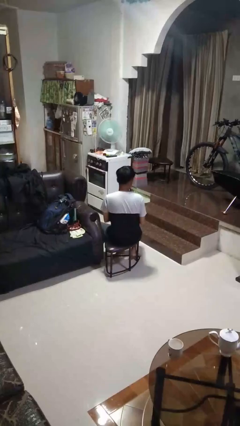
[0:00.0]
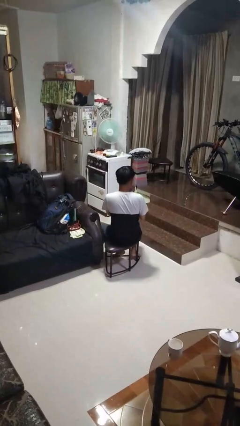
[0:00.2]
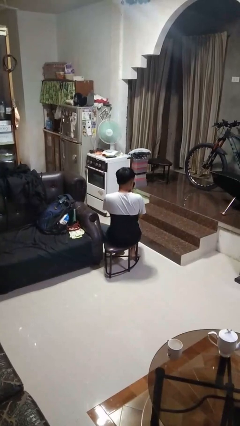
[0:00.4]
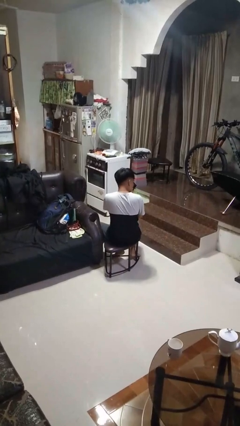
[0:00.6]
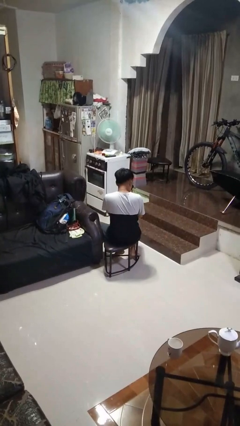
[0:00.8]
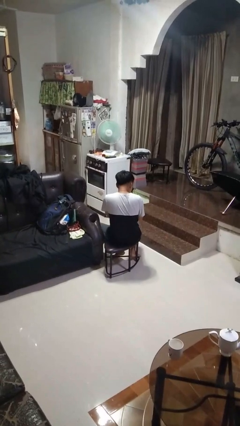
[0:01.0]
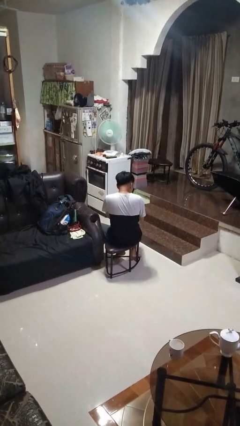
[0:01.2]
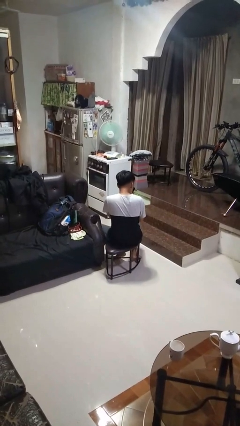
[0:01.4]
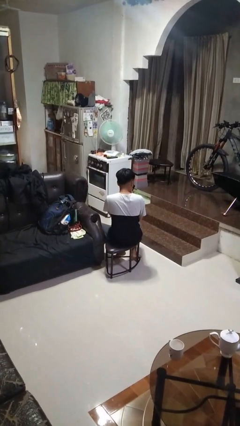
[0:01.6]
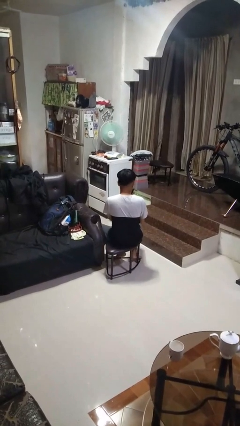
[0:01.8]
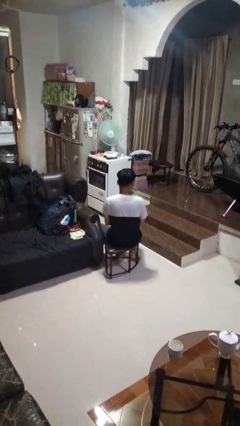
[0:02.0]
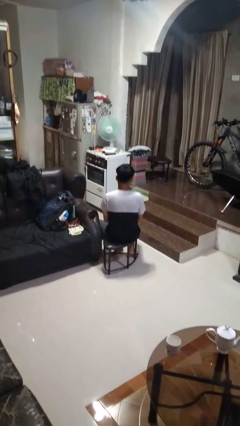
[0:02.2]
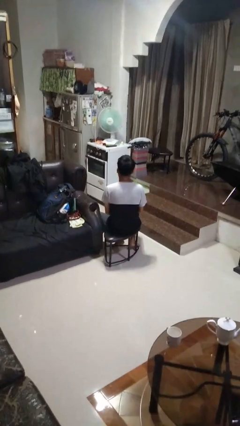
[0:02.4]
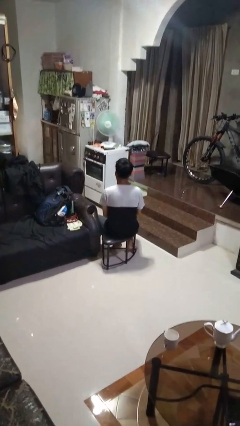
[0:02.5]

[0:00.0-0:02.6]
person blows nose

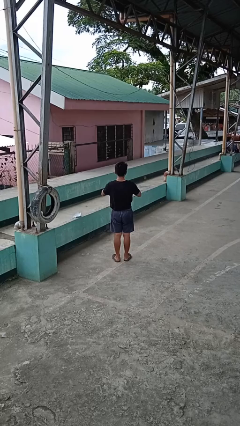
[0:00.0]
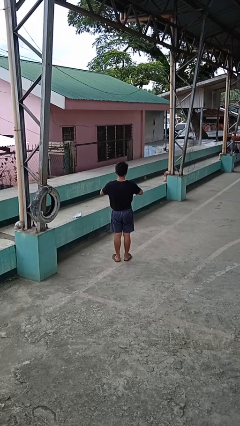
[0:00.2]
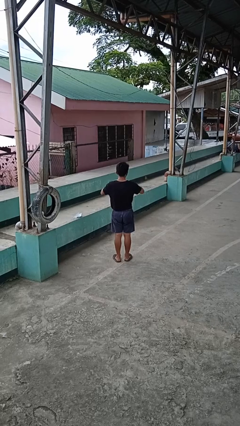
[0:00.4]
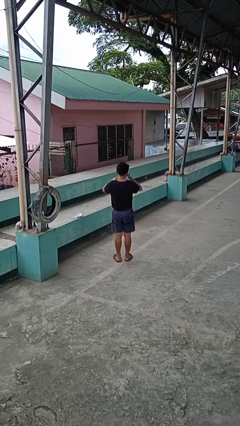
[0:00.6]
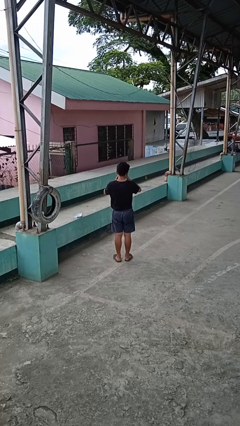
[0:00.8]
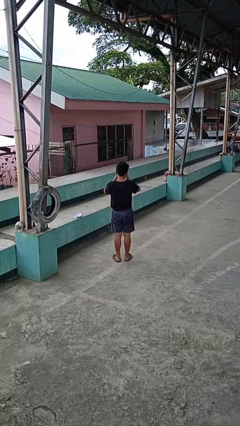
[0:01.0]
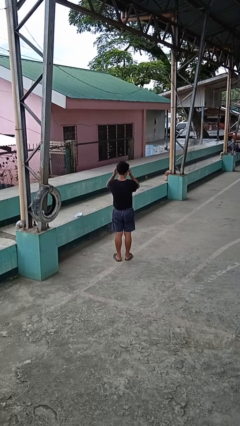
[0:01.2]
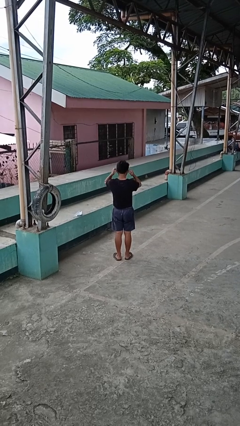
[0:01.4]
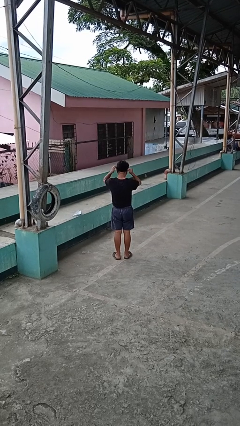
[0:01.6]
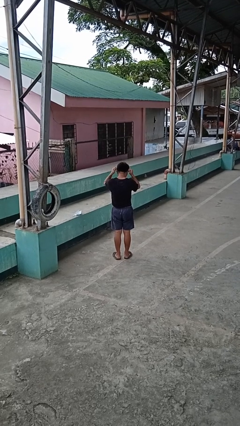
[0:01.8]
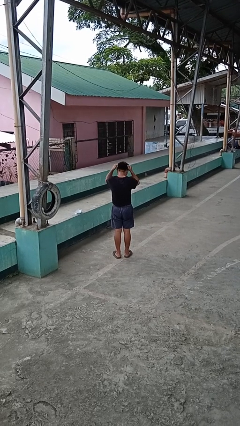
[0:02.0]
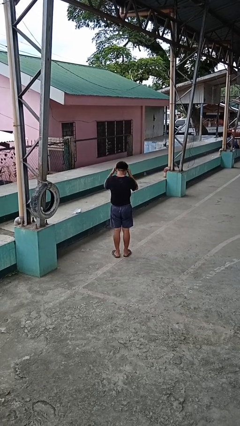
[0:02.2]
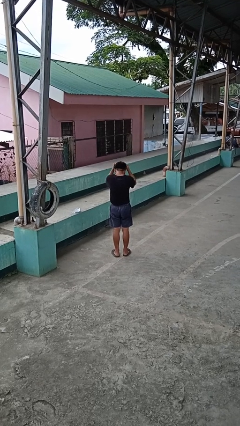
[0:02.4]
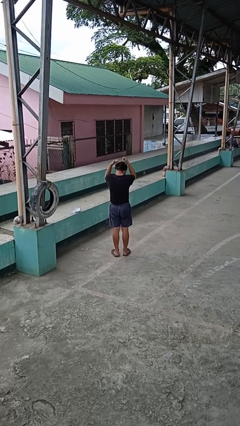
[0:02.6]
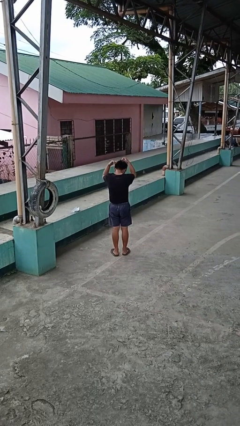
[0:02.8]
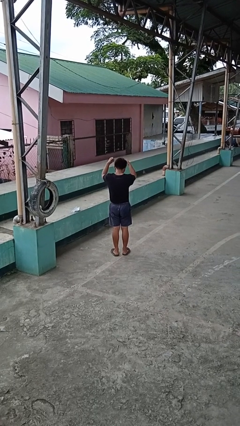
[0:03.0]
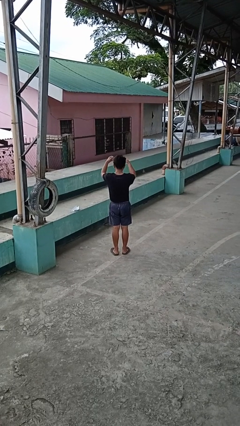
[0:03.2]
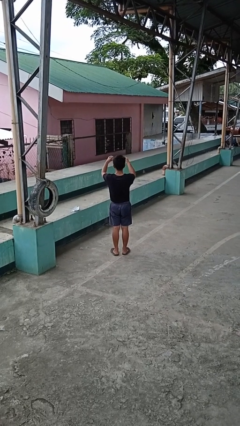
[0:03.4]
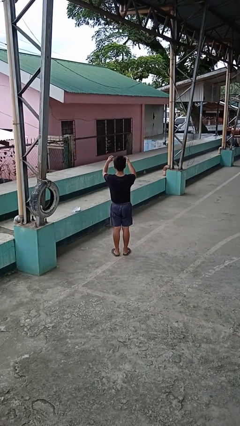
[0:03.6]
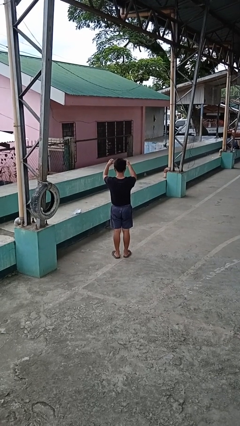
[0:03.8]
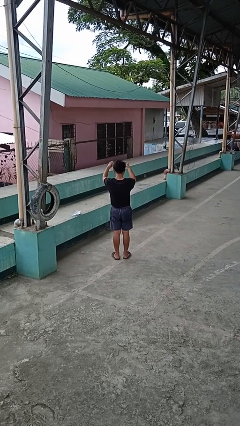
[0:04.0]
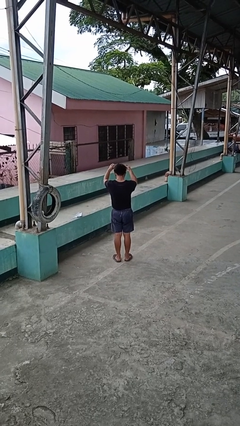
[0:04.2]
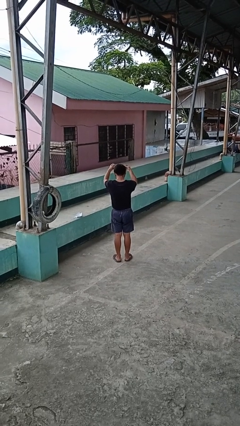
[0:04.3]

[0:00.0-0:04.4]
person takes off necklace

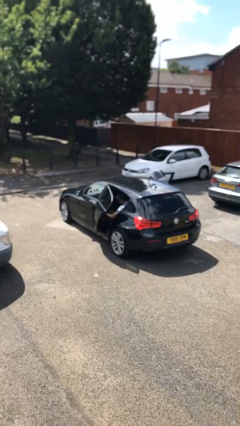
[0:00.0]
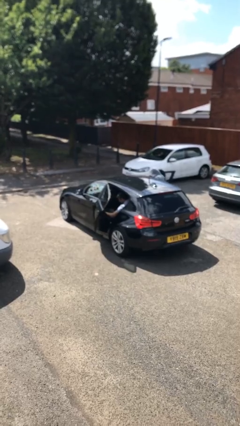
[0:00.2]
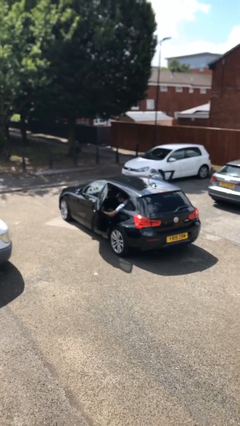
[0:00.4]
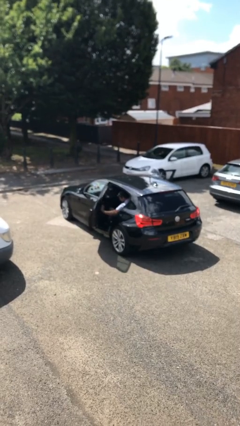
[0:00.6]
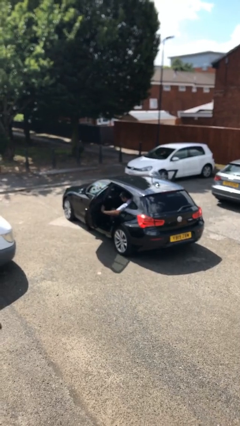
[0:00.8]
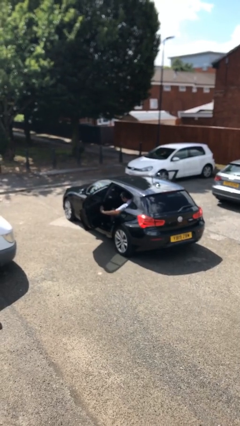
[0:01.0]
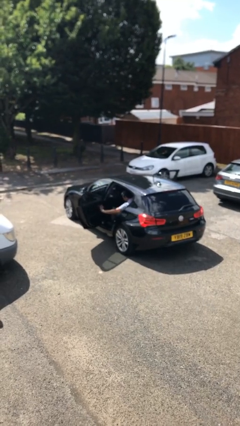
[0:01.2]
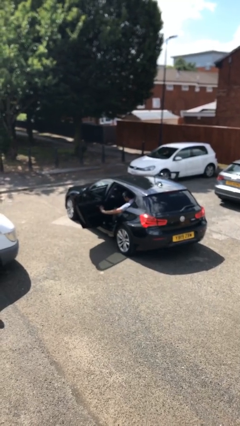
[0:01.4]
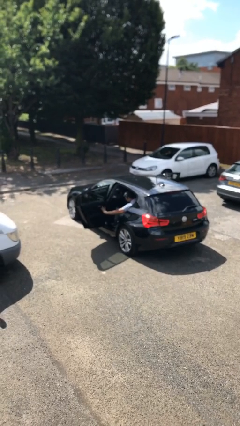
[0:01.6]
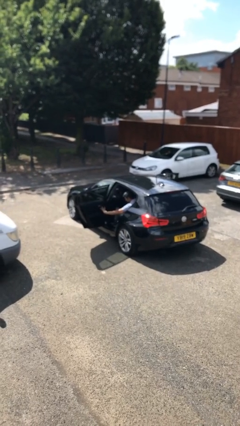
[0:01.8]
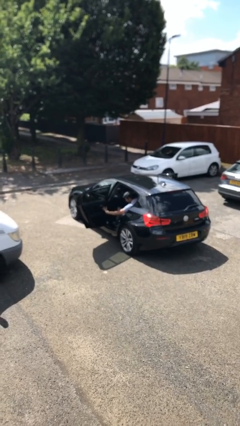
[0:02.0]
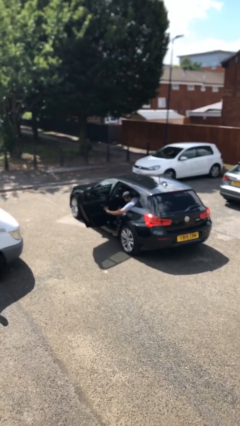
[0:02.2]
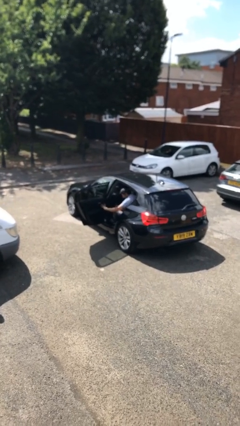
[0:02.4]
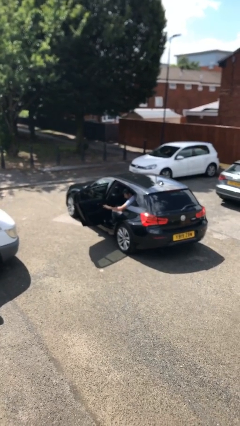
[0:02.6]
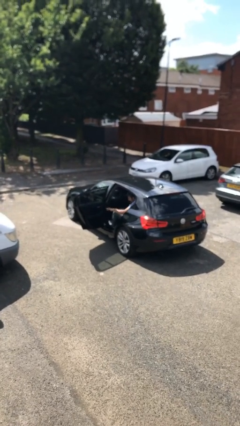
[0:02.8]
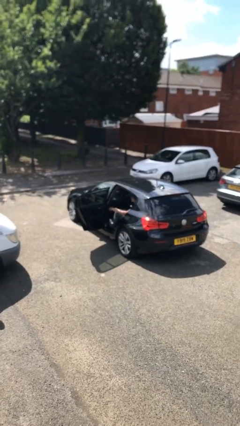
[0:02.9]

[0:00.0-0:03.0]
person opens car door

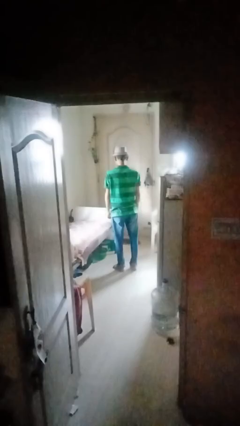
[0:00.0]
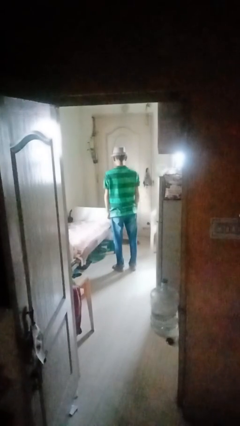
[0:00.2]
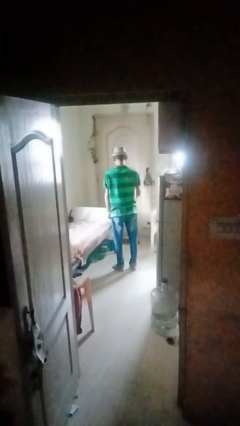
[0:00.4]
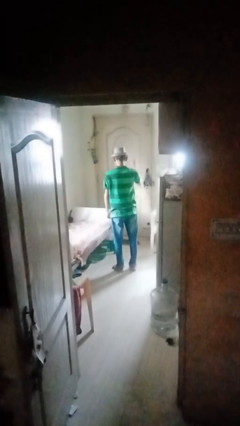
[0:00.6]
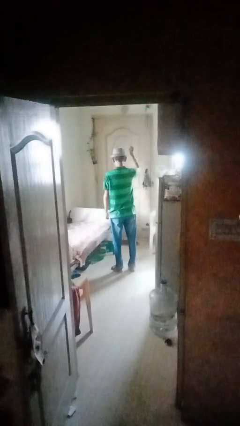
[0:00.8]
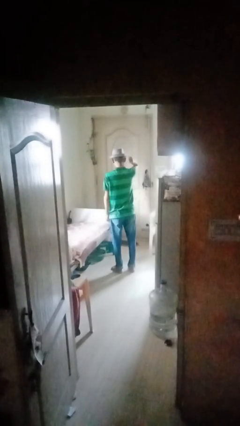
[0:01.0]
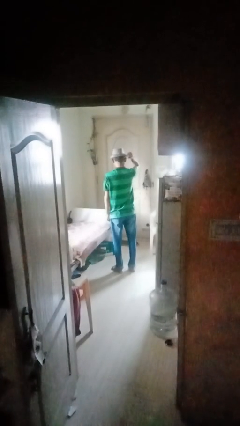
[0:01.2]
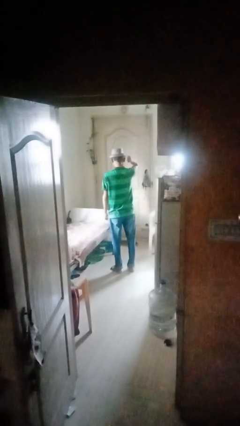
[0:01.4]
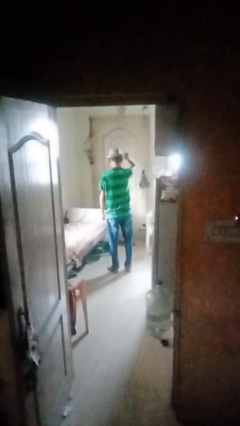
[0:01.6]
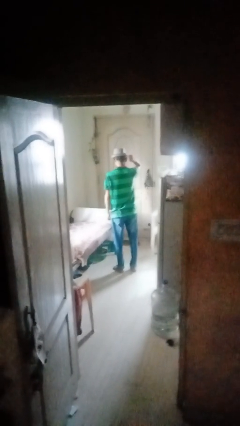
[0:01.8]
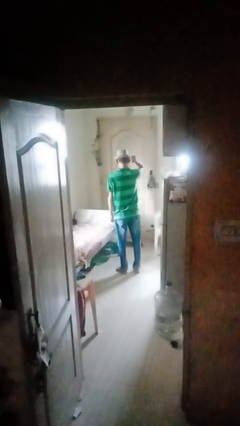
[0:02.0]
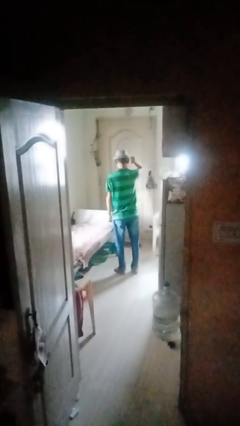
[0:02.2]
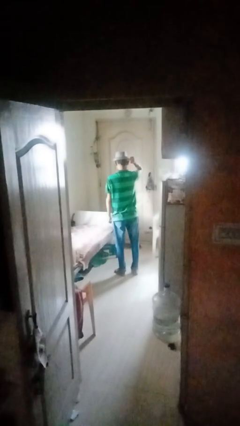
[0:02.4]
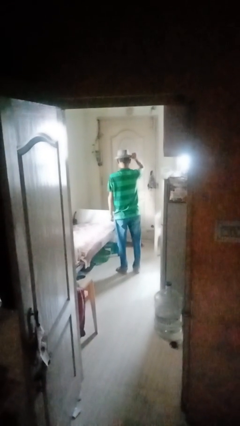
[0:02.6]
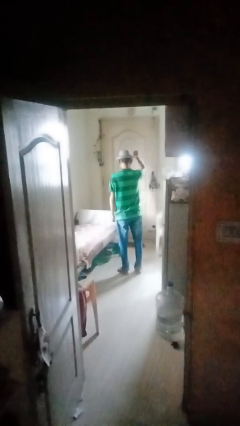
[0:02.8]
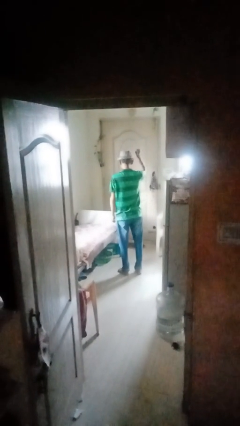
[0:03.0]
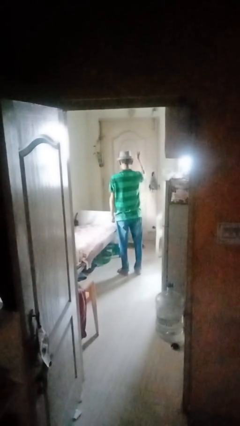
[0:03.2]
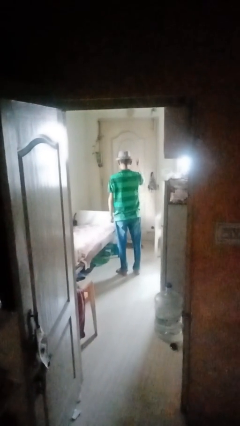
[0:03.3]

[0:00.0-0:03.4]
person gestures behind me

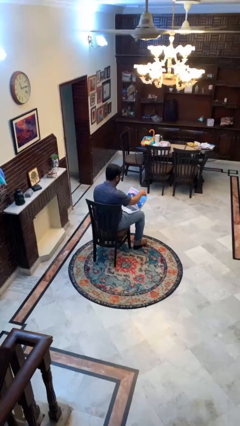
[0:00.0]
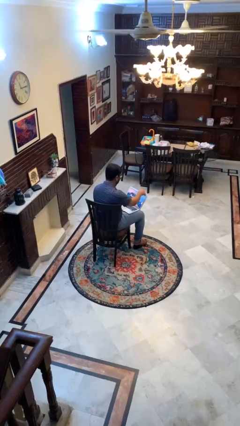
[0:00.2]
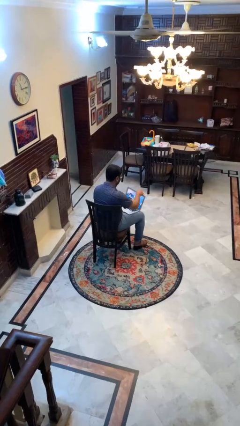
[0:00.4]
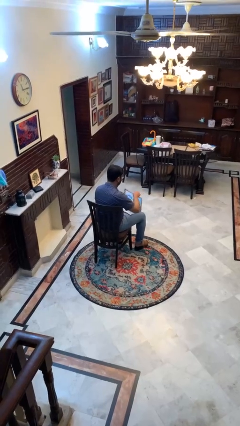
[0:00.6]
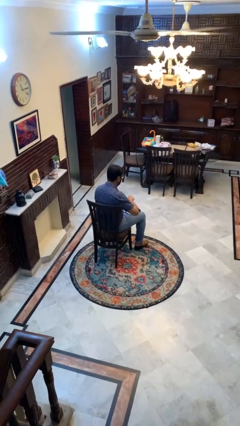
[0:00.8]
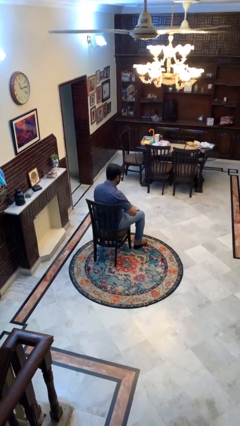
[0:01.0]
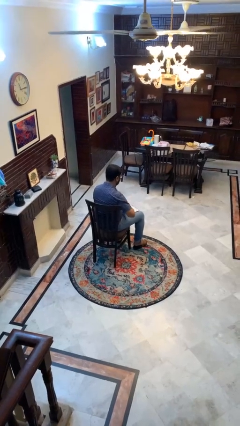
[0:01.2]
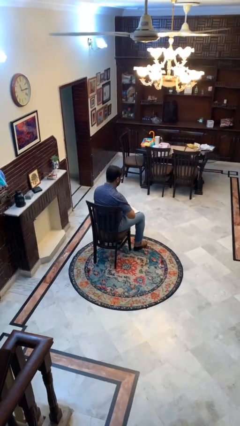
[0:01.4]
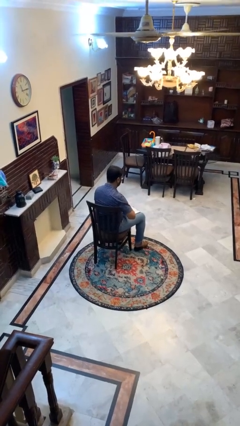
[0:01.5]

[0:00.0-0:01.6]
person closes laptop

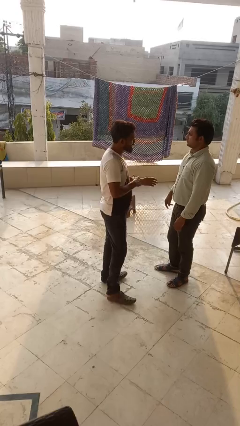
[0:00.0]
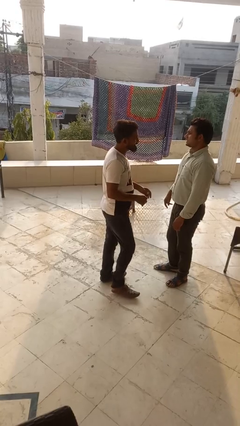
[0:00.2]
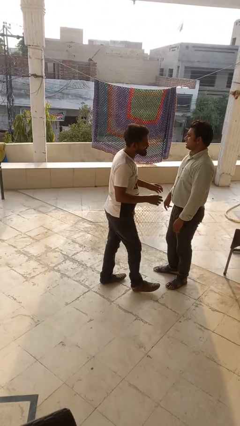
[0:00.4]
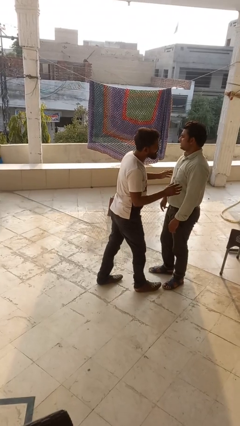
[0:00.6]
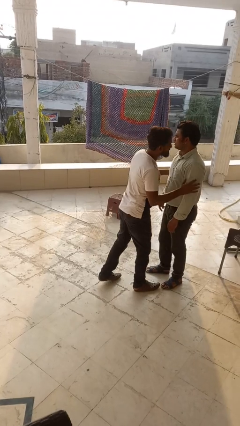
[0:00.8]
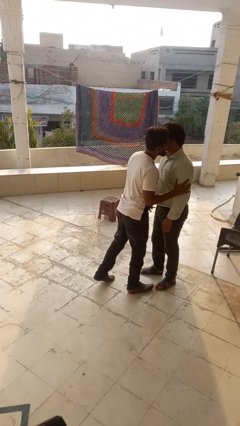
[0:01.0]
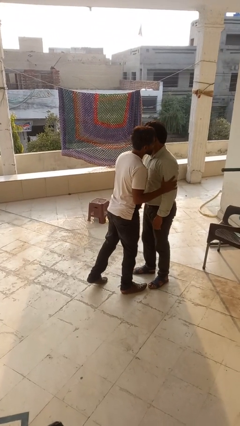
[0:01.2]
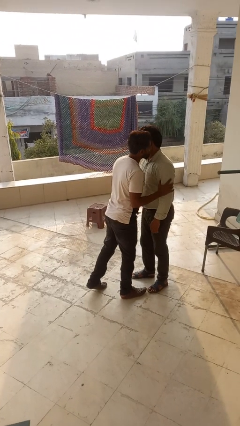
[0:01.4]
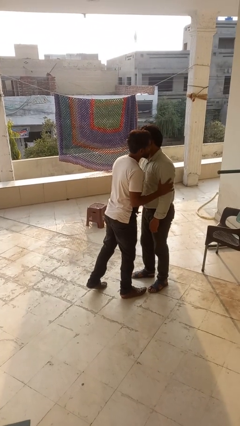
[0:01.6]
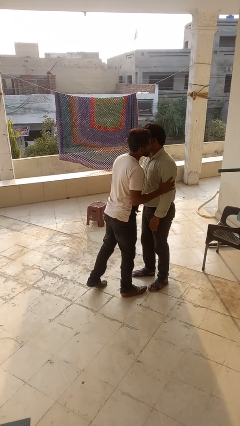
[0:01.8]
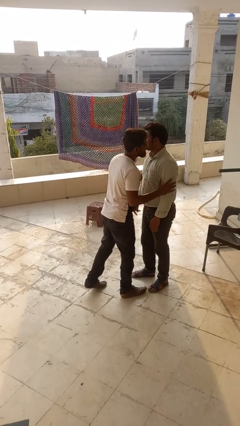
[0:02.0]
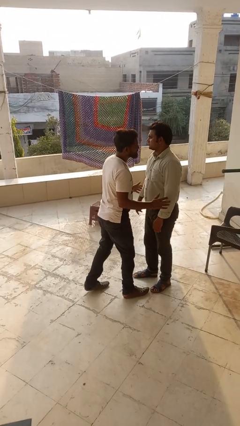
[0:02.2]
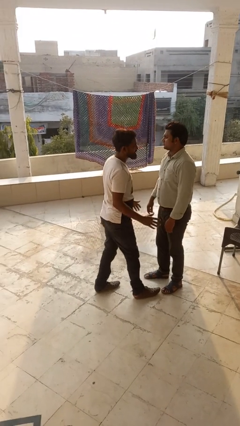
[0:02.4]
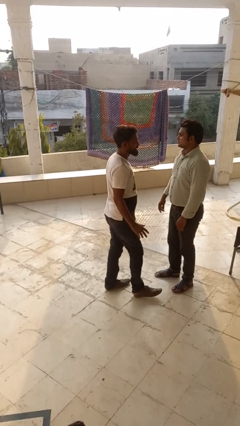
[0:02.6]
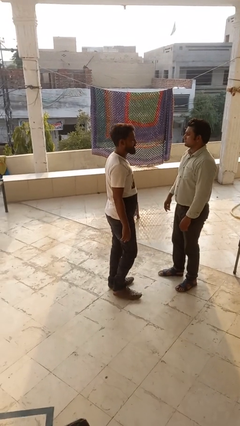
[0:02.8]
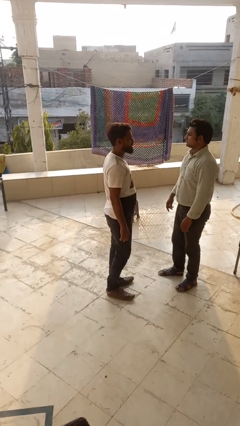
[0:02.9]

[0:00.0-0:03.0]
person kisses cheek of person
